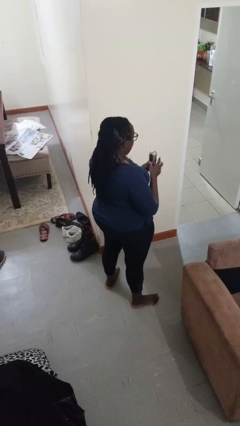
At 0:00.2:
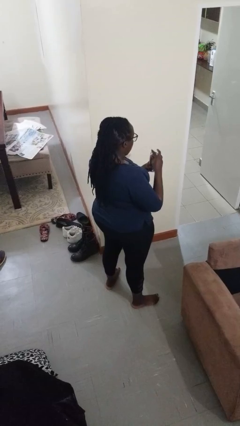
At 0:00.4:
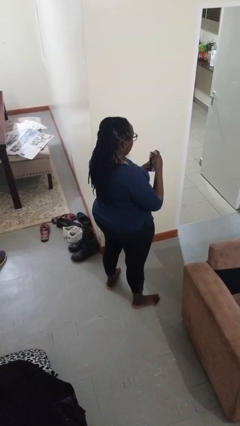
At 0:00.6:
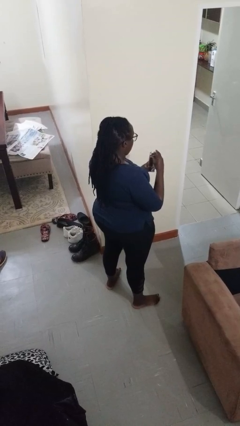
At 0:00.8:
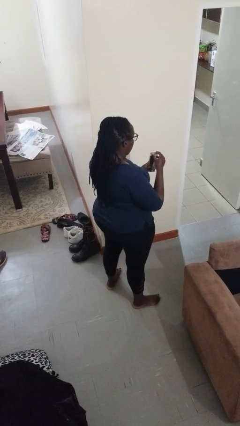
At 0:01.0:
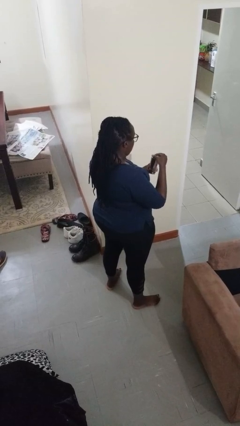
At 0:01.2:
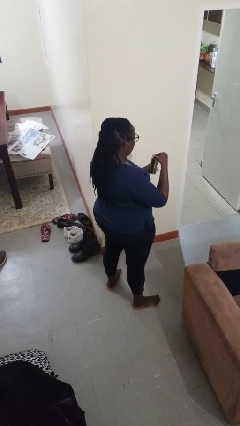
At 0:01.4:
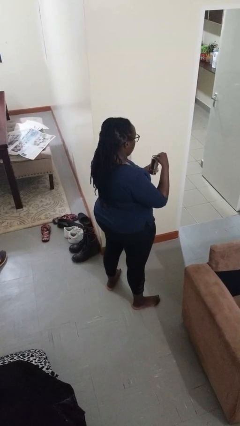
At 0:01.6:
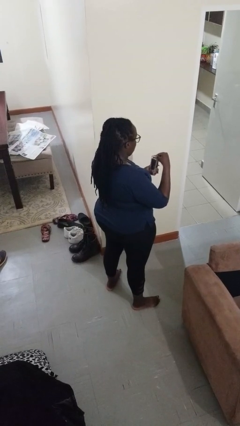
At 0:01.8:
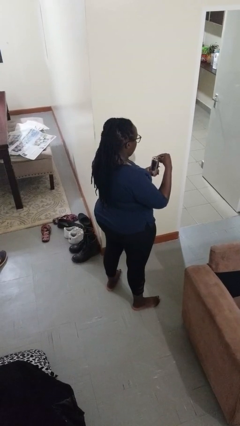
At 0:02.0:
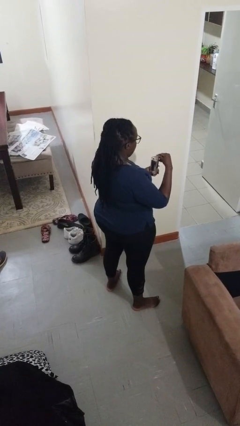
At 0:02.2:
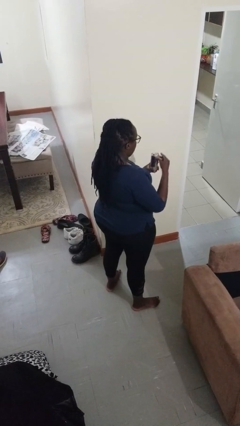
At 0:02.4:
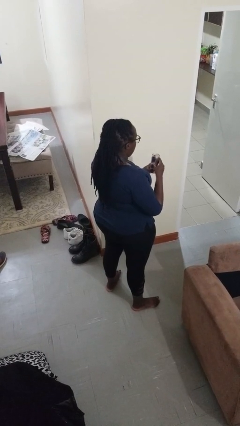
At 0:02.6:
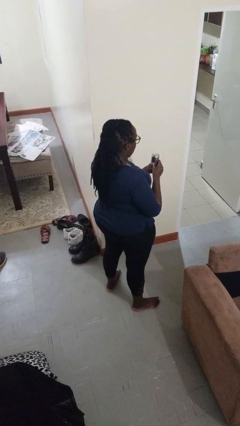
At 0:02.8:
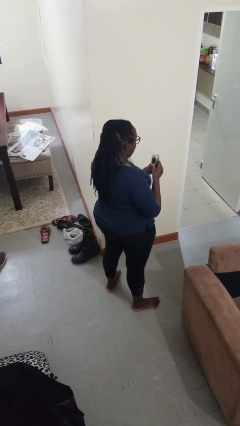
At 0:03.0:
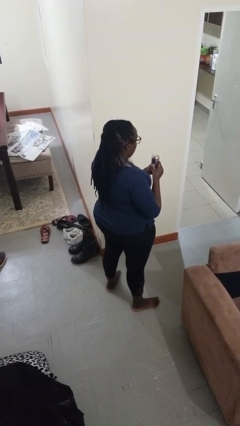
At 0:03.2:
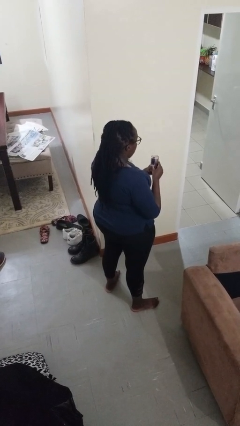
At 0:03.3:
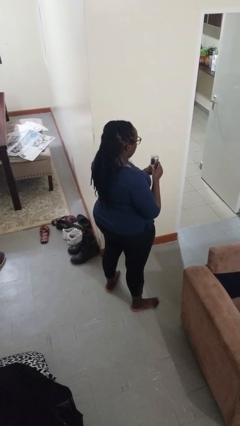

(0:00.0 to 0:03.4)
person opens beverage can

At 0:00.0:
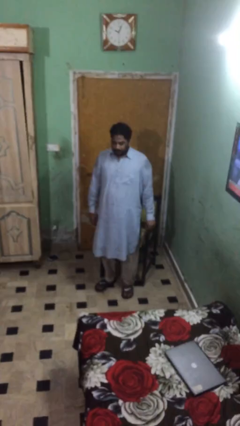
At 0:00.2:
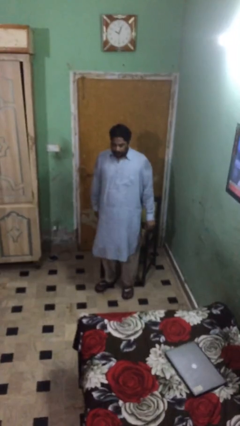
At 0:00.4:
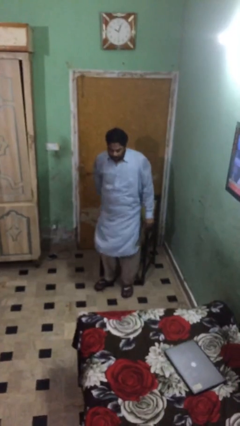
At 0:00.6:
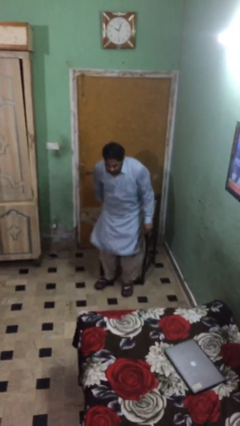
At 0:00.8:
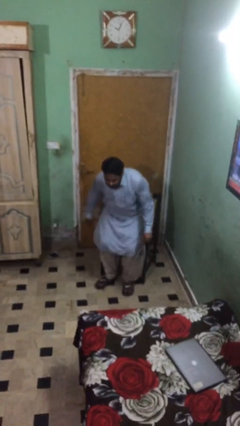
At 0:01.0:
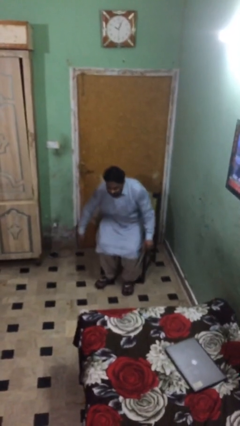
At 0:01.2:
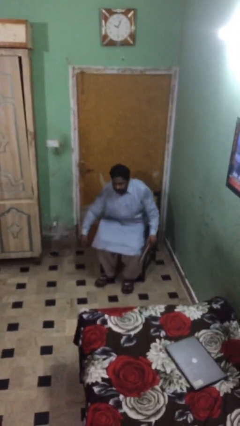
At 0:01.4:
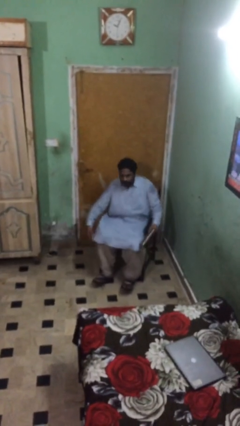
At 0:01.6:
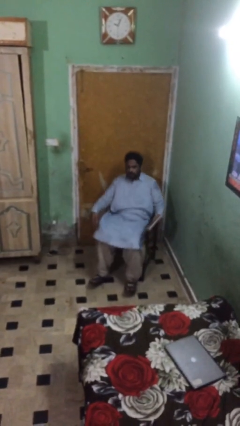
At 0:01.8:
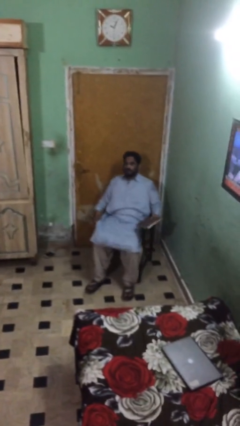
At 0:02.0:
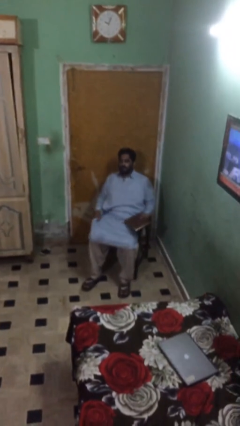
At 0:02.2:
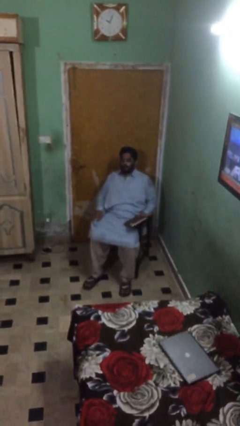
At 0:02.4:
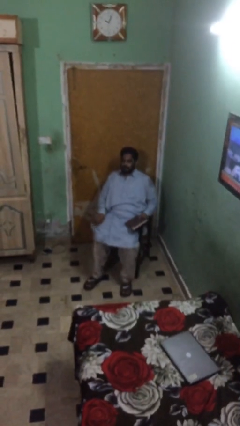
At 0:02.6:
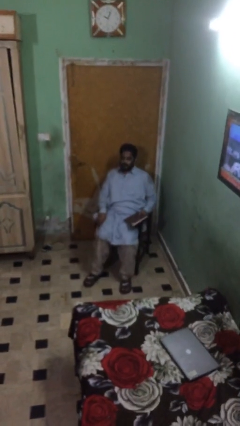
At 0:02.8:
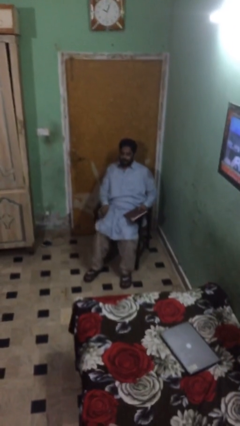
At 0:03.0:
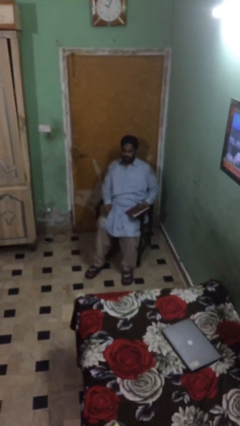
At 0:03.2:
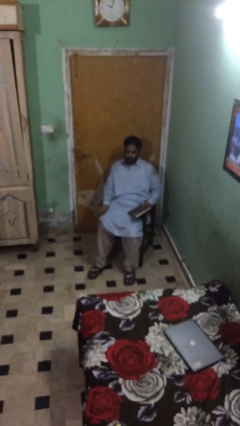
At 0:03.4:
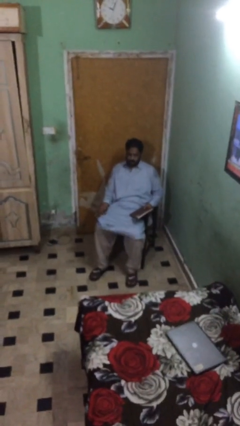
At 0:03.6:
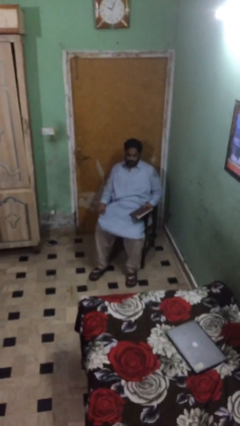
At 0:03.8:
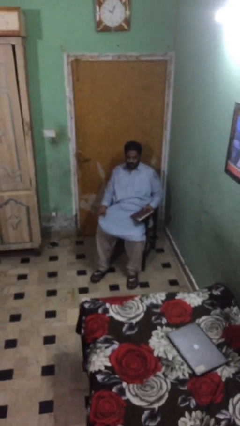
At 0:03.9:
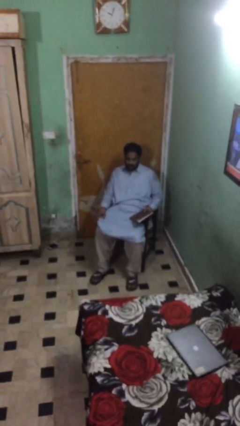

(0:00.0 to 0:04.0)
person sits down

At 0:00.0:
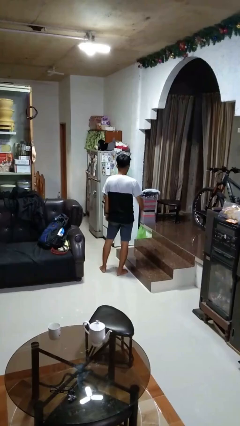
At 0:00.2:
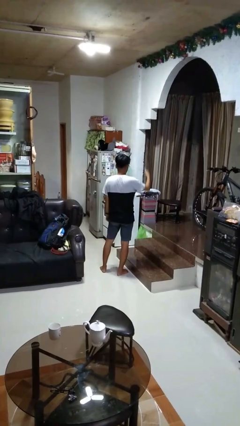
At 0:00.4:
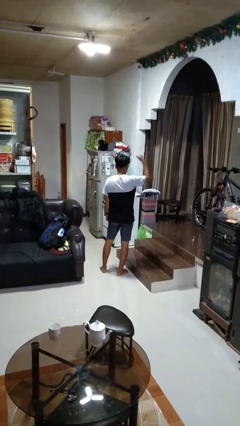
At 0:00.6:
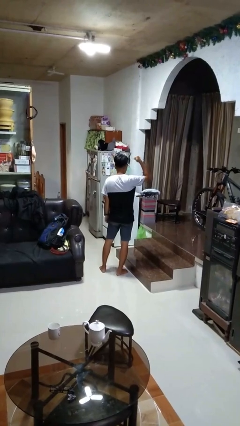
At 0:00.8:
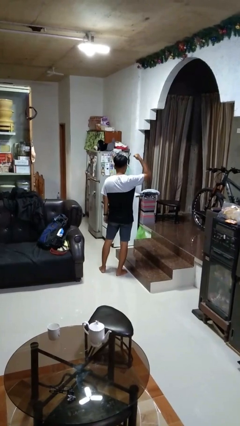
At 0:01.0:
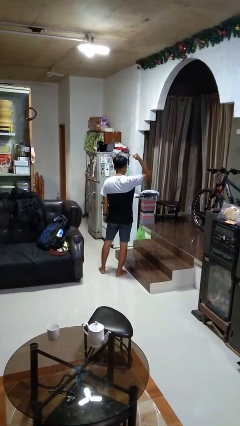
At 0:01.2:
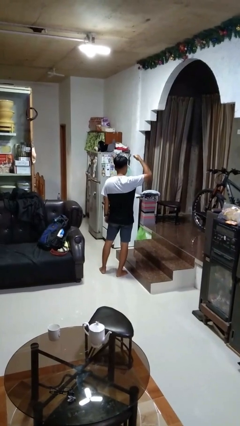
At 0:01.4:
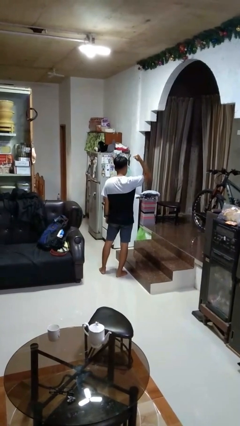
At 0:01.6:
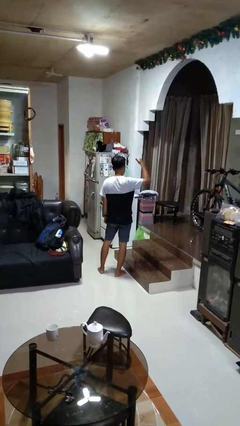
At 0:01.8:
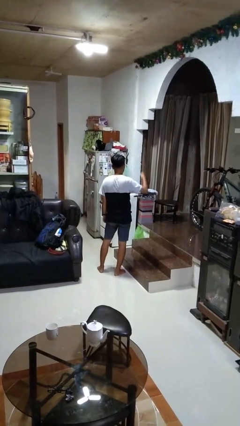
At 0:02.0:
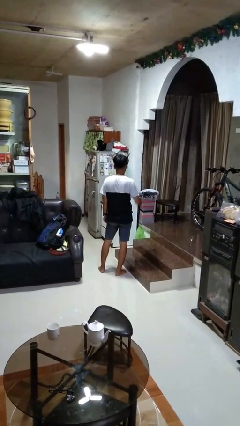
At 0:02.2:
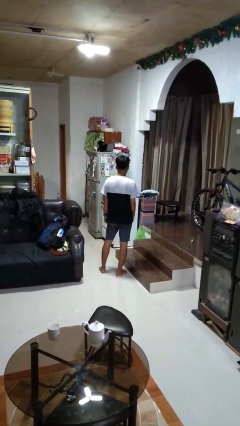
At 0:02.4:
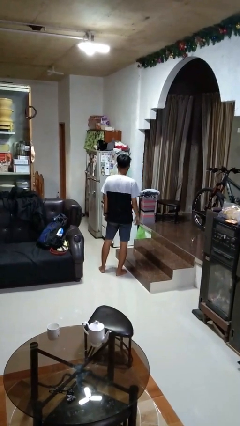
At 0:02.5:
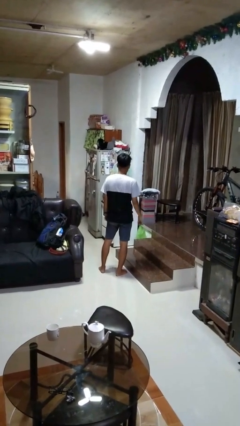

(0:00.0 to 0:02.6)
person gestures behind me

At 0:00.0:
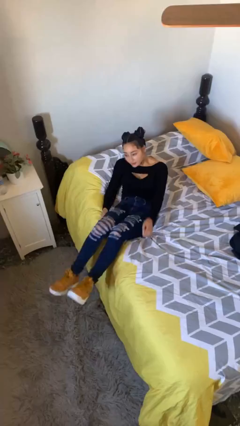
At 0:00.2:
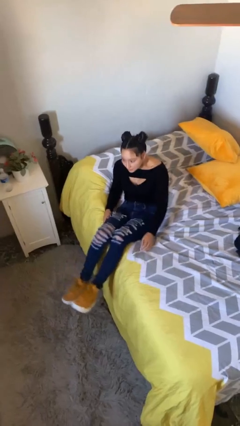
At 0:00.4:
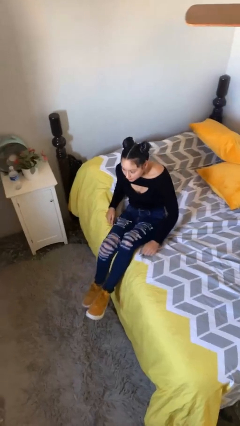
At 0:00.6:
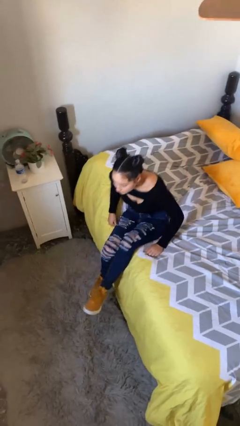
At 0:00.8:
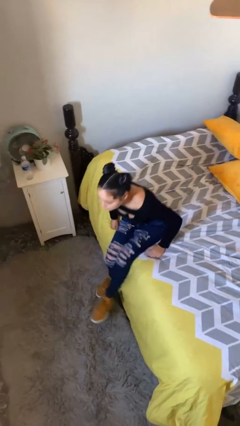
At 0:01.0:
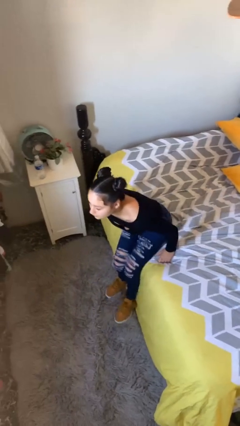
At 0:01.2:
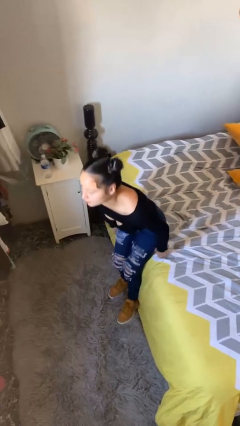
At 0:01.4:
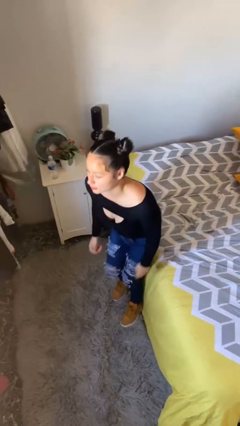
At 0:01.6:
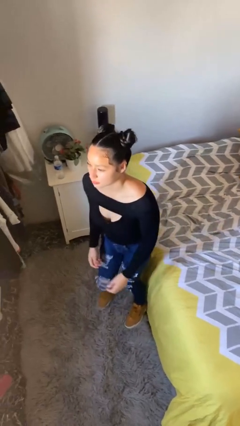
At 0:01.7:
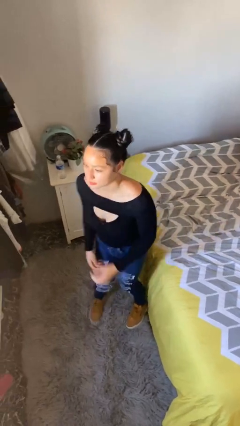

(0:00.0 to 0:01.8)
person stands up

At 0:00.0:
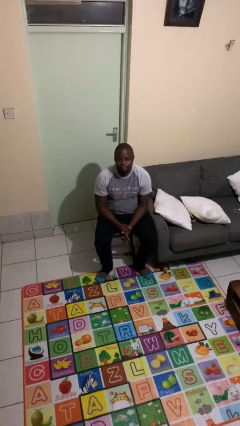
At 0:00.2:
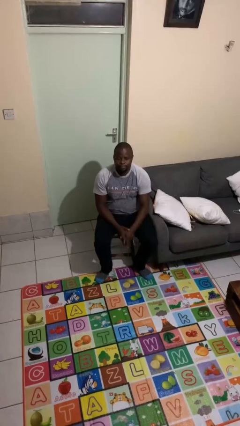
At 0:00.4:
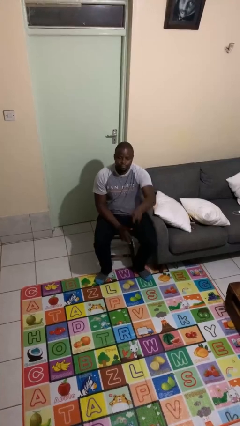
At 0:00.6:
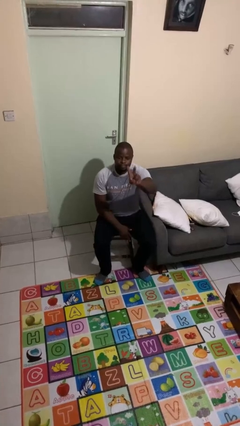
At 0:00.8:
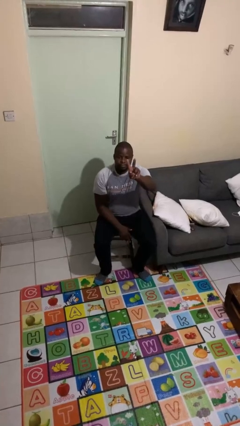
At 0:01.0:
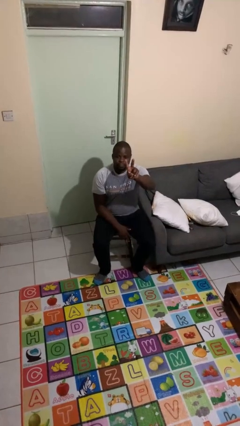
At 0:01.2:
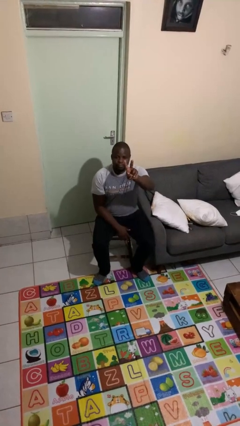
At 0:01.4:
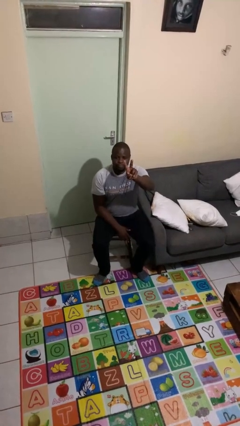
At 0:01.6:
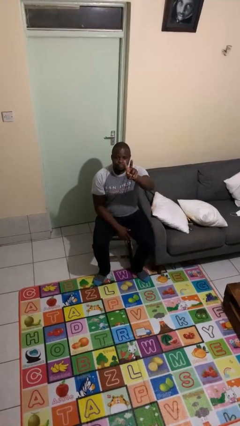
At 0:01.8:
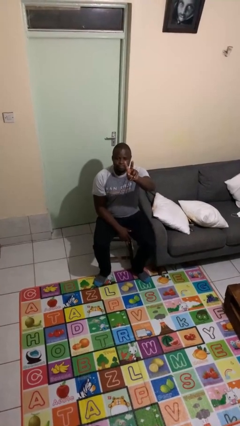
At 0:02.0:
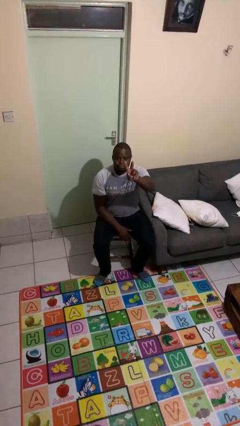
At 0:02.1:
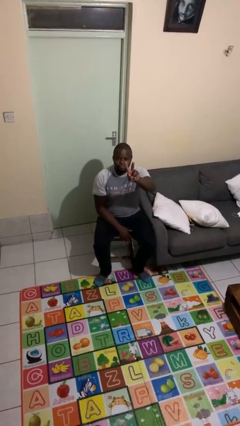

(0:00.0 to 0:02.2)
person gestures peace

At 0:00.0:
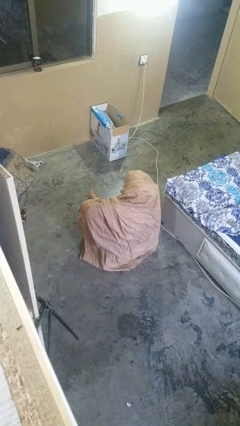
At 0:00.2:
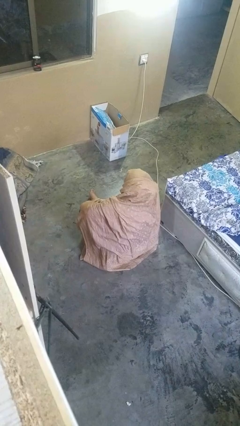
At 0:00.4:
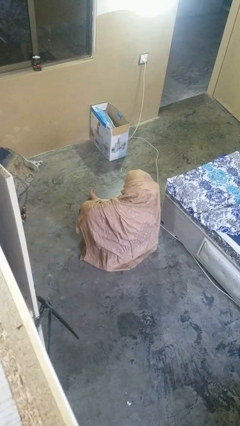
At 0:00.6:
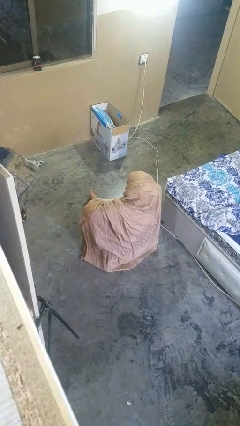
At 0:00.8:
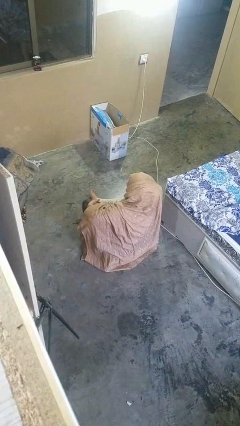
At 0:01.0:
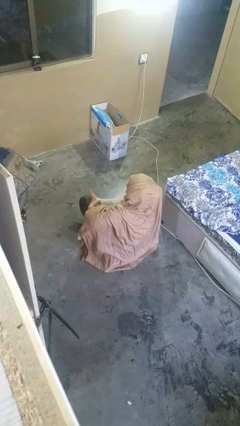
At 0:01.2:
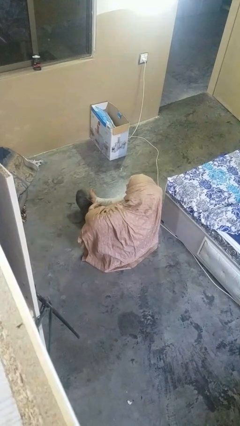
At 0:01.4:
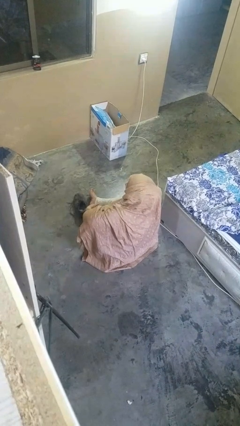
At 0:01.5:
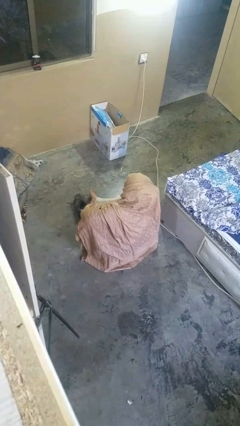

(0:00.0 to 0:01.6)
person takes off shoes

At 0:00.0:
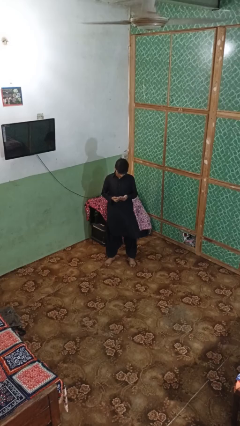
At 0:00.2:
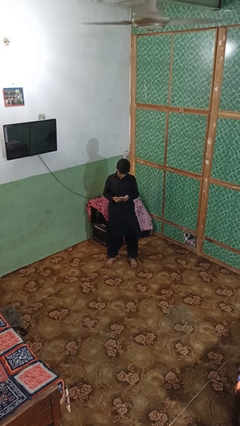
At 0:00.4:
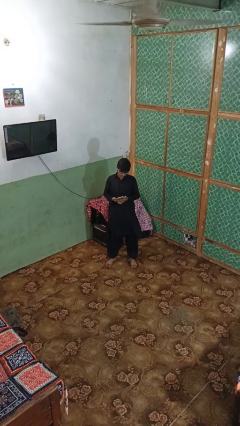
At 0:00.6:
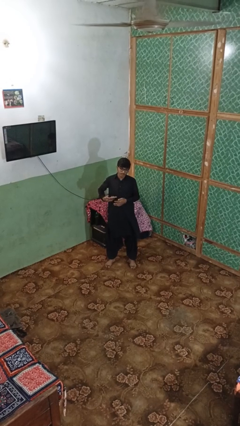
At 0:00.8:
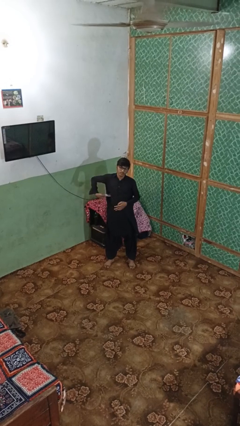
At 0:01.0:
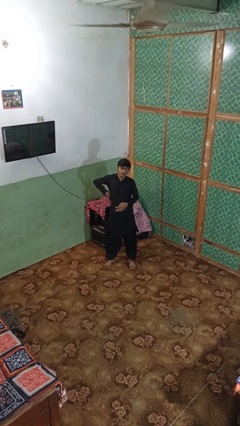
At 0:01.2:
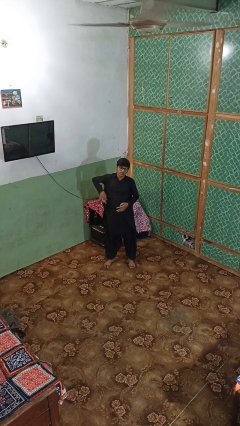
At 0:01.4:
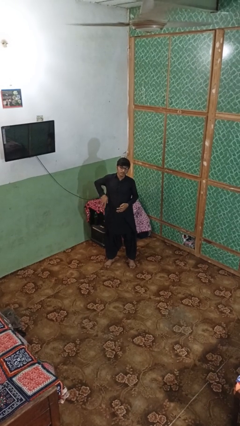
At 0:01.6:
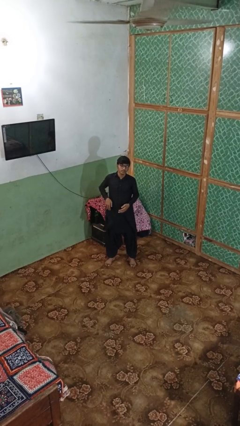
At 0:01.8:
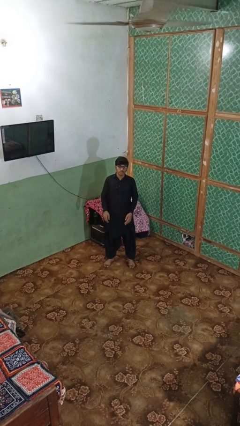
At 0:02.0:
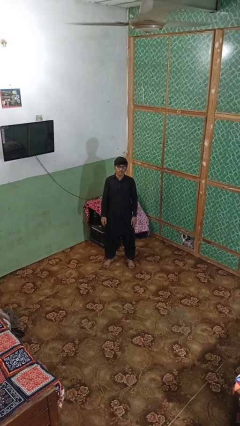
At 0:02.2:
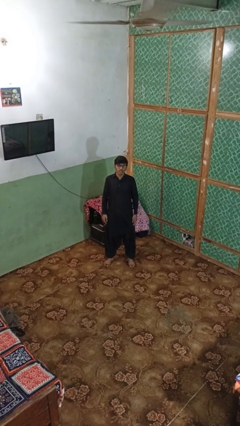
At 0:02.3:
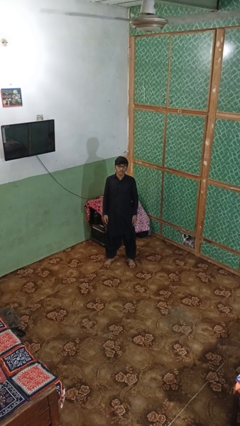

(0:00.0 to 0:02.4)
person puts phone into pocket
